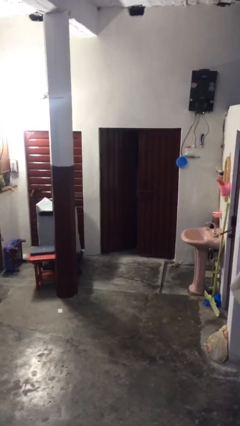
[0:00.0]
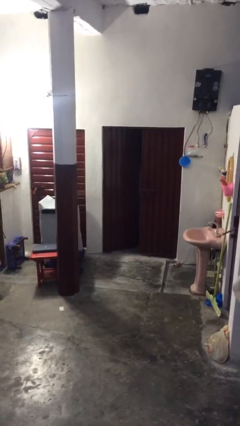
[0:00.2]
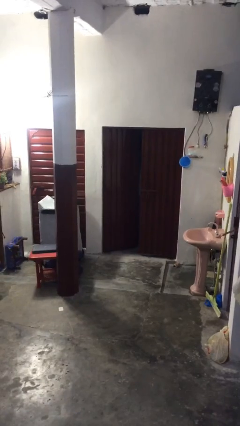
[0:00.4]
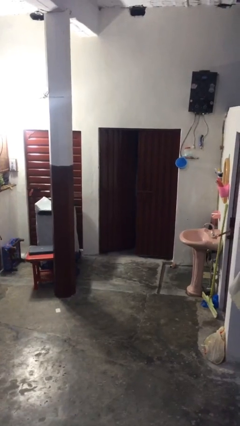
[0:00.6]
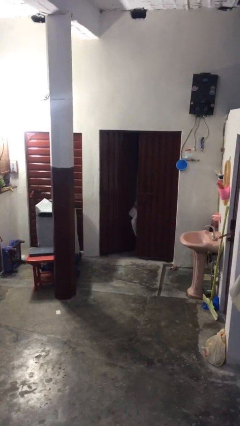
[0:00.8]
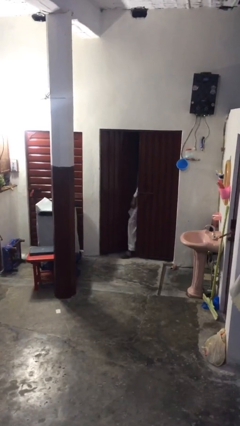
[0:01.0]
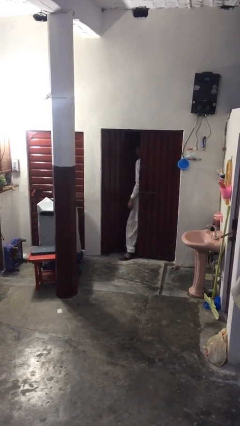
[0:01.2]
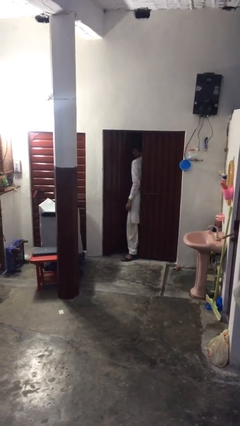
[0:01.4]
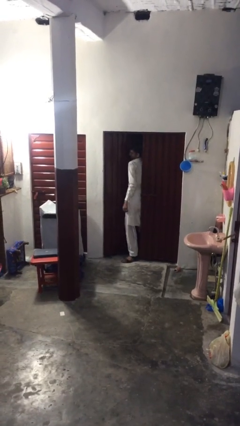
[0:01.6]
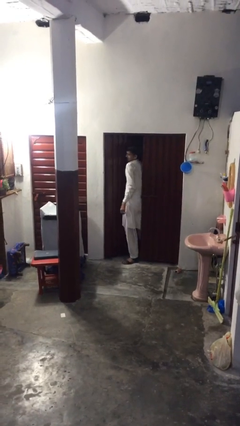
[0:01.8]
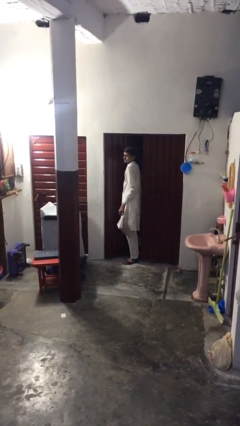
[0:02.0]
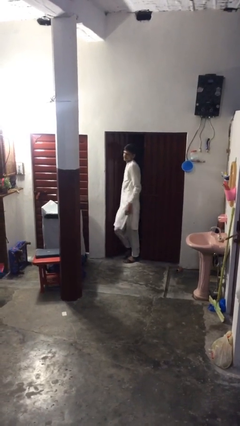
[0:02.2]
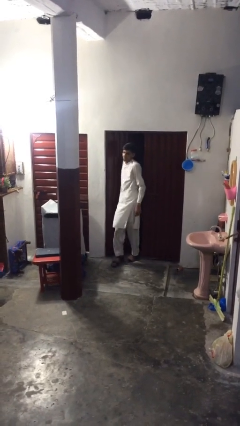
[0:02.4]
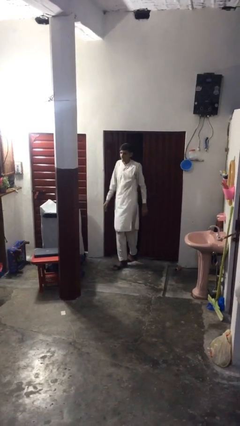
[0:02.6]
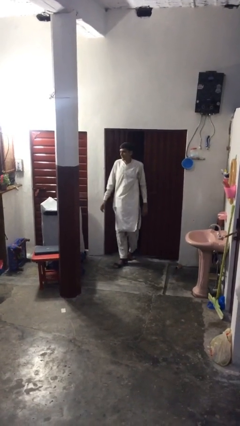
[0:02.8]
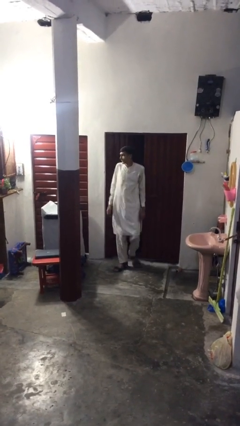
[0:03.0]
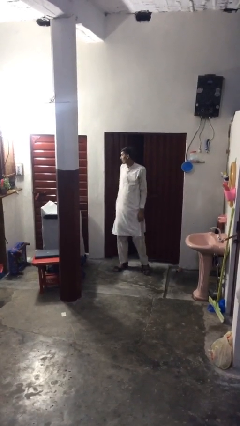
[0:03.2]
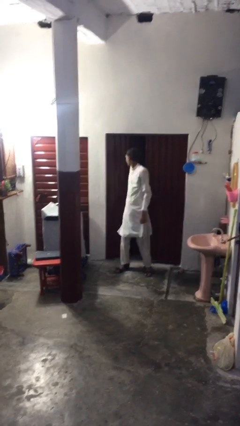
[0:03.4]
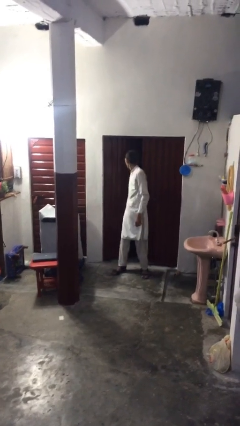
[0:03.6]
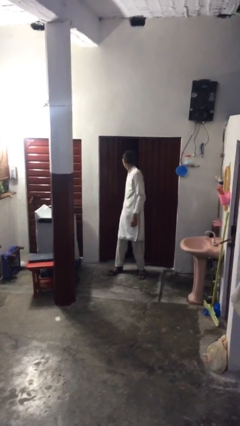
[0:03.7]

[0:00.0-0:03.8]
person enters scene through structure

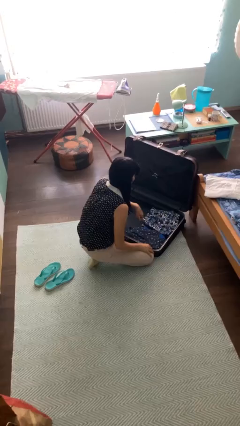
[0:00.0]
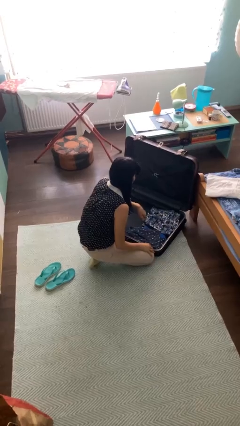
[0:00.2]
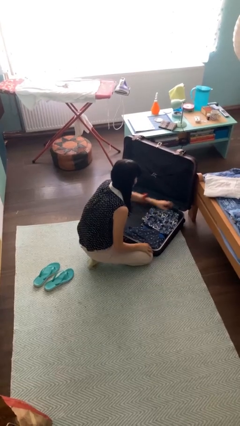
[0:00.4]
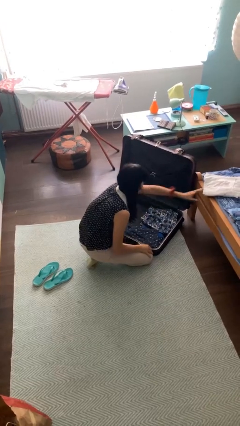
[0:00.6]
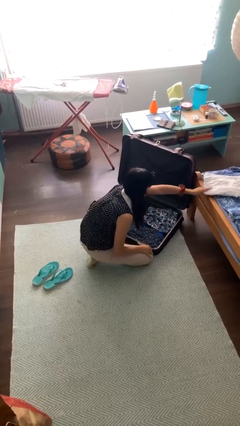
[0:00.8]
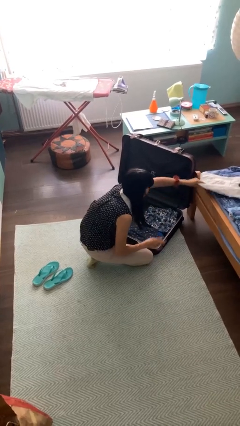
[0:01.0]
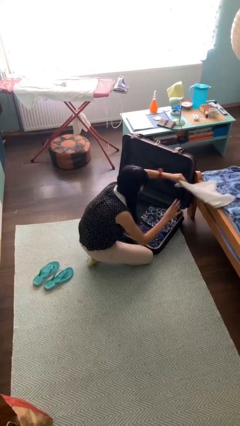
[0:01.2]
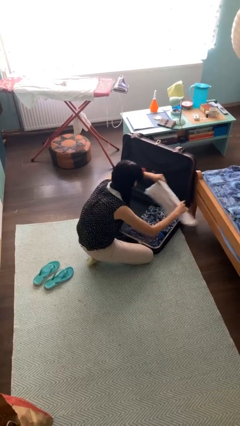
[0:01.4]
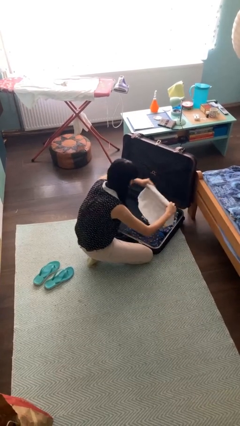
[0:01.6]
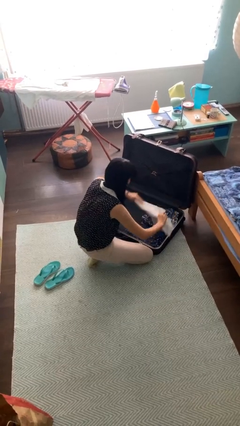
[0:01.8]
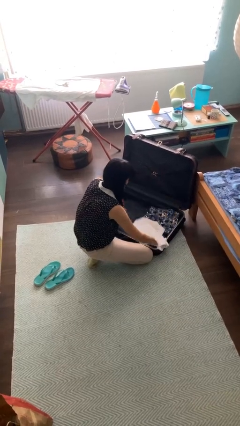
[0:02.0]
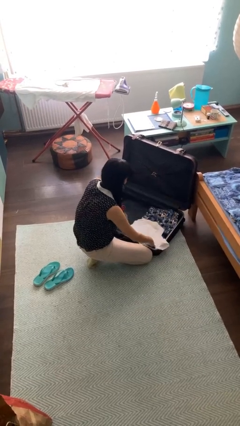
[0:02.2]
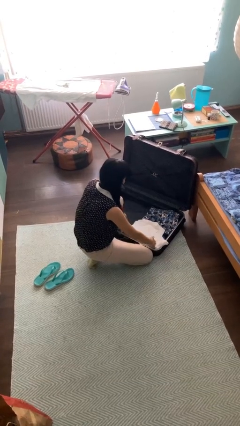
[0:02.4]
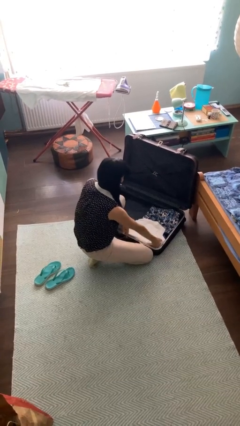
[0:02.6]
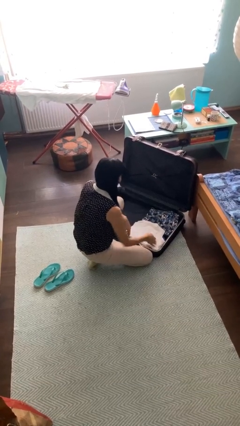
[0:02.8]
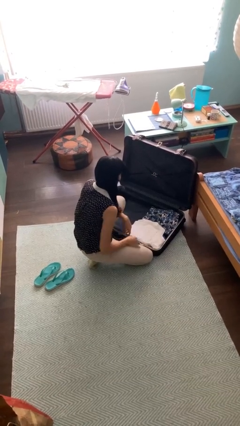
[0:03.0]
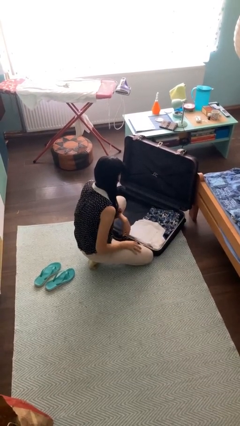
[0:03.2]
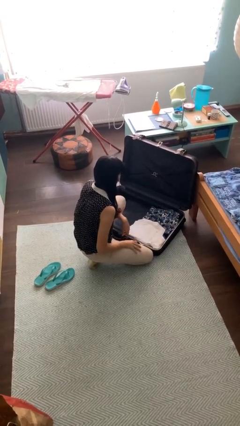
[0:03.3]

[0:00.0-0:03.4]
person loads clothes into suitcase

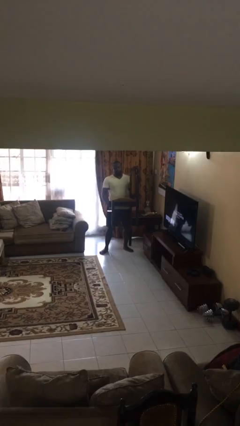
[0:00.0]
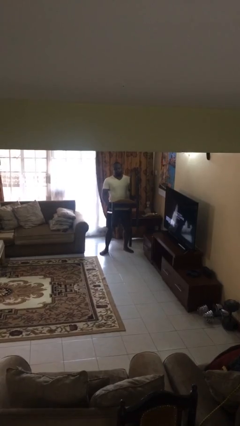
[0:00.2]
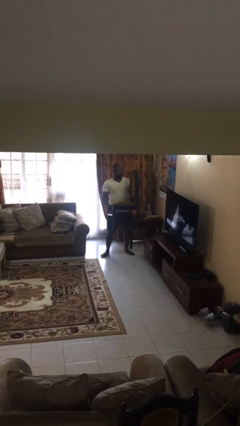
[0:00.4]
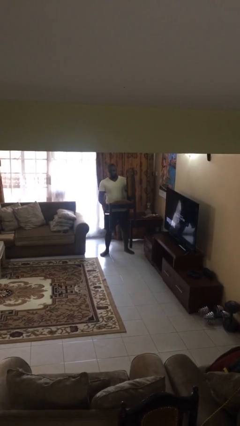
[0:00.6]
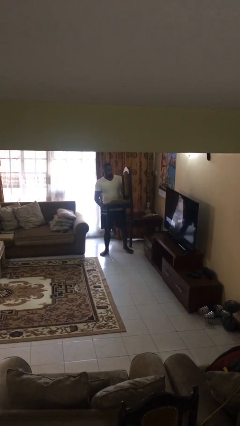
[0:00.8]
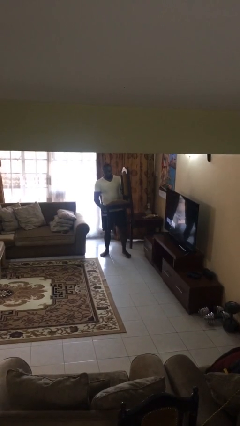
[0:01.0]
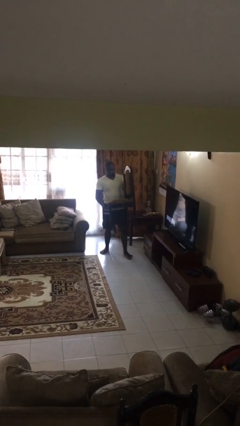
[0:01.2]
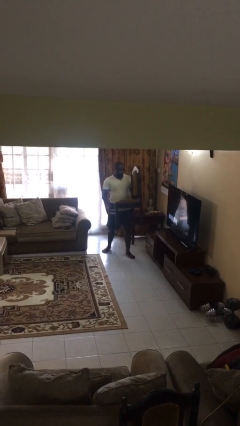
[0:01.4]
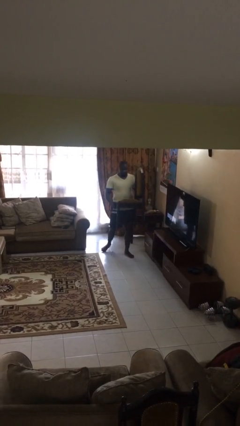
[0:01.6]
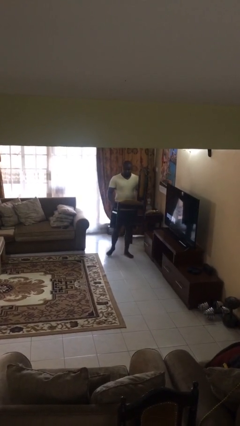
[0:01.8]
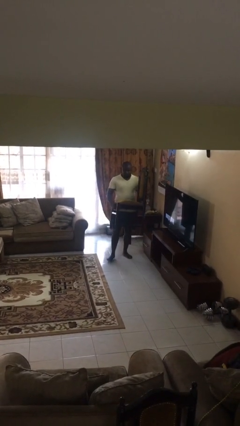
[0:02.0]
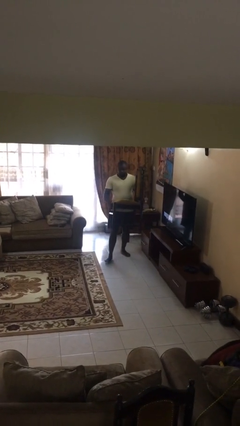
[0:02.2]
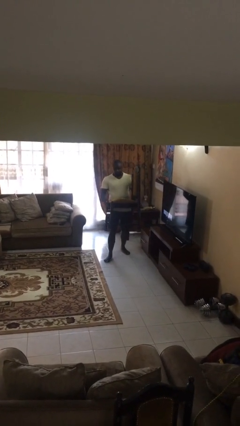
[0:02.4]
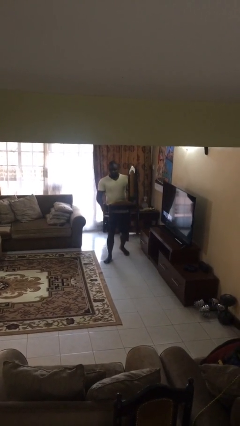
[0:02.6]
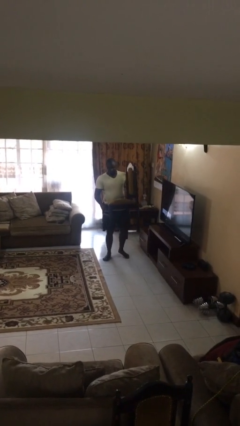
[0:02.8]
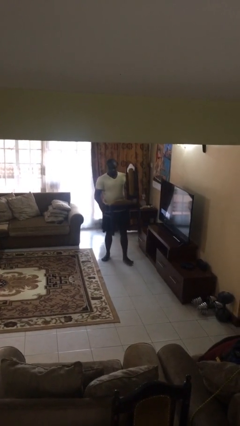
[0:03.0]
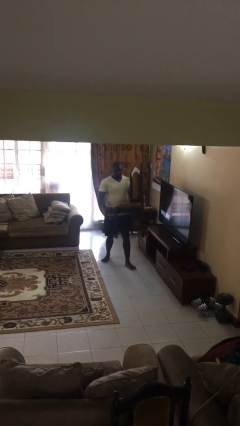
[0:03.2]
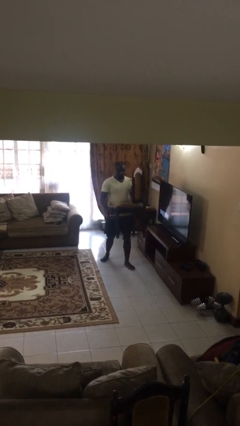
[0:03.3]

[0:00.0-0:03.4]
person carries heavy object

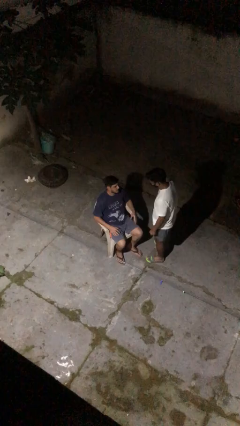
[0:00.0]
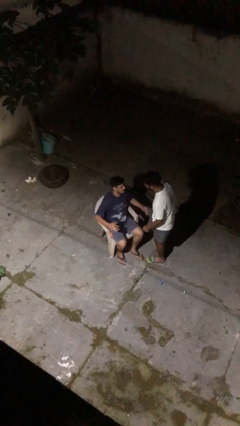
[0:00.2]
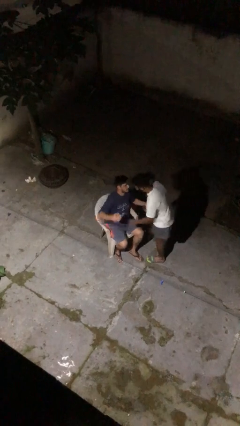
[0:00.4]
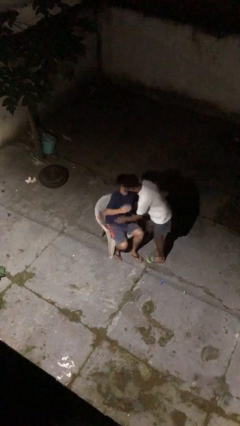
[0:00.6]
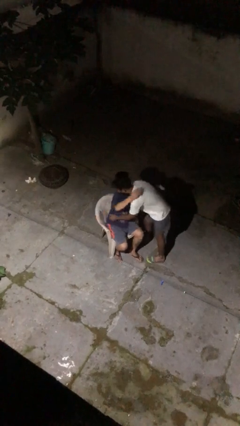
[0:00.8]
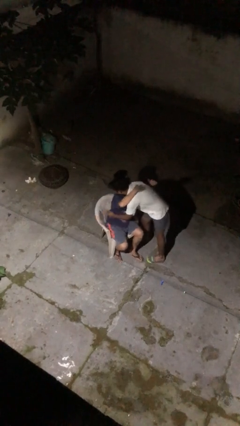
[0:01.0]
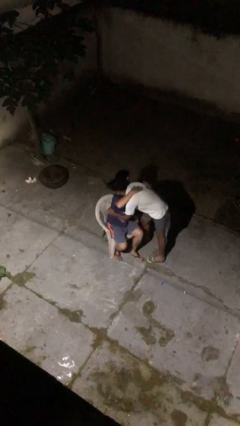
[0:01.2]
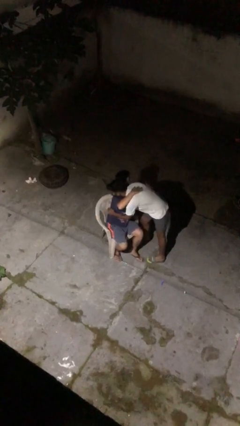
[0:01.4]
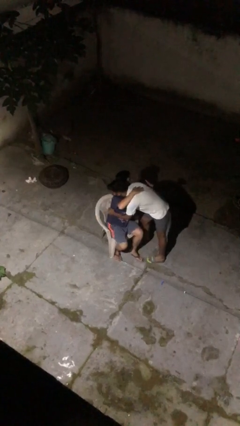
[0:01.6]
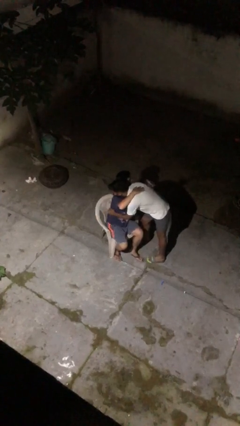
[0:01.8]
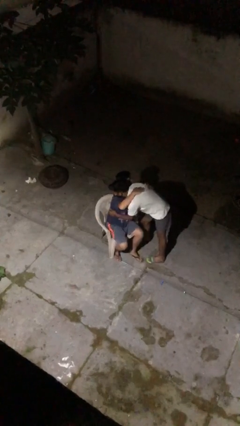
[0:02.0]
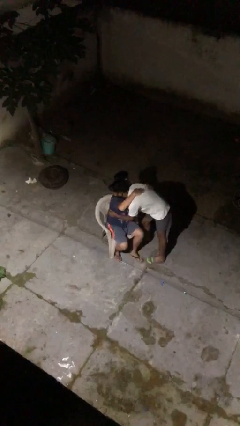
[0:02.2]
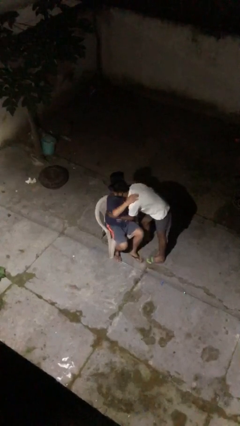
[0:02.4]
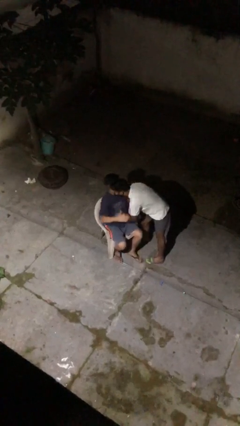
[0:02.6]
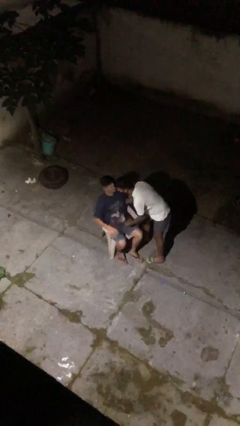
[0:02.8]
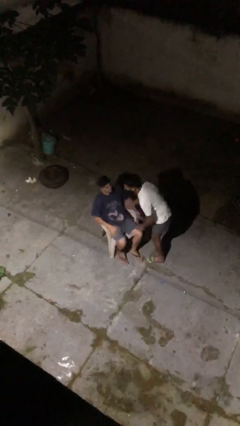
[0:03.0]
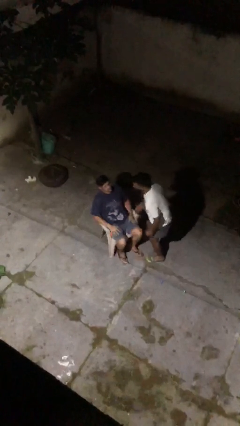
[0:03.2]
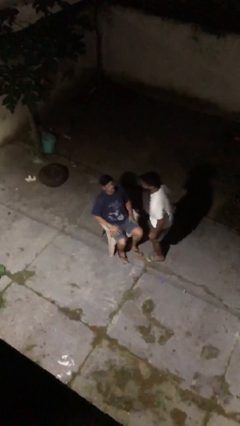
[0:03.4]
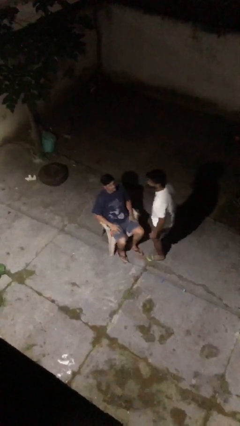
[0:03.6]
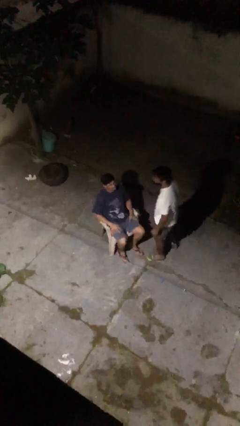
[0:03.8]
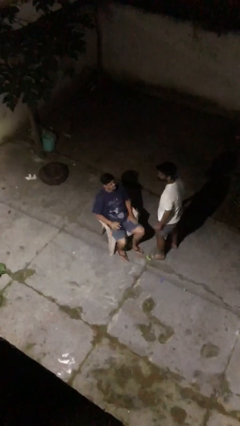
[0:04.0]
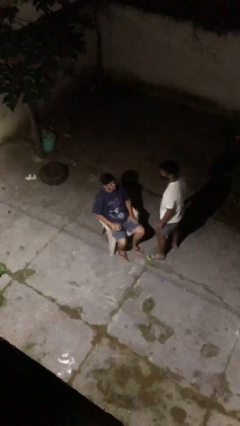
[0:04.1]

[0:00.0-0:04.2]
person embraces person

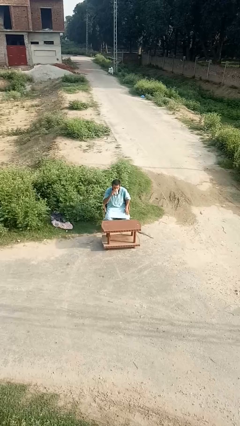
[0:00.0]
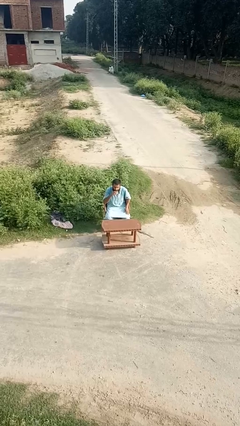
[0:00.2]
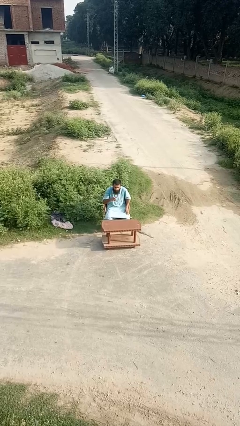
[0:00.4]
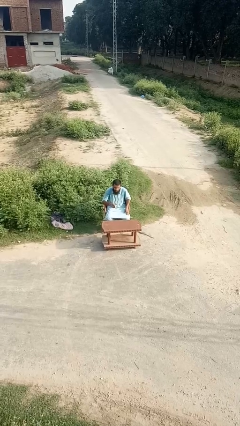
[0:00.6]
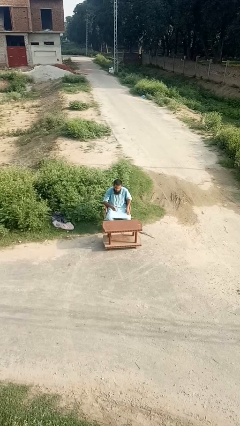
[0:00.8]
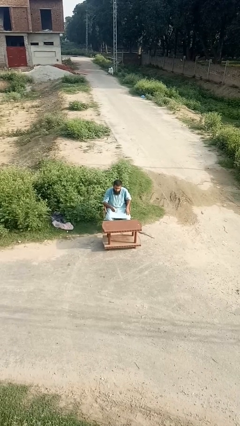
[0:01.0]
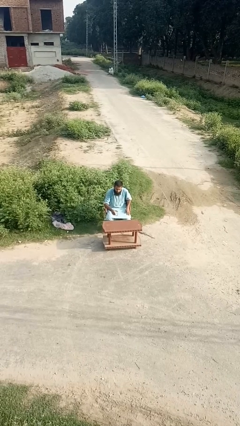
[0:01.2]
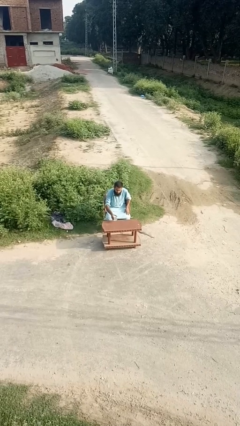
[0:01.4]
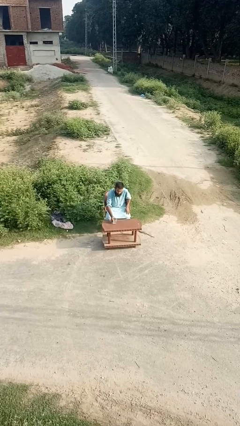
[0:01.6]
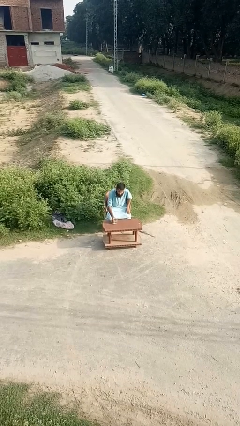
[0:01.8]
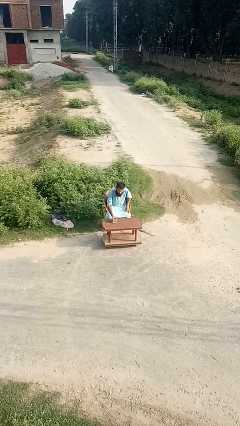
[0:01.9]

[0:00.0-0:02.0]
person puts down object on table
